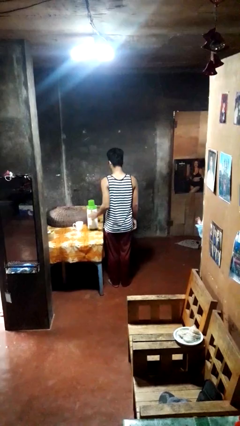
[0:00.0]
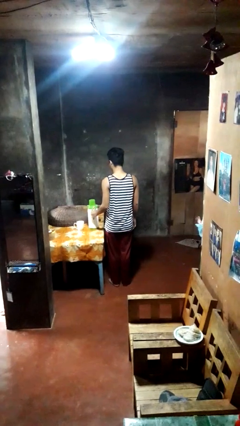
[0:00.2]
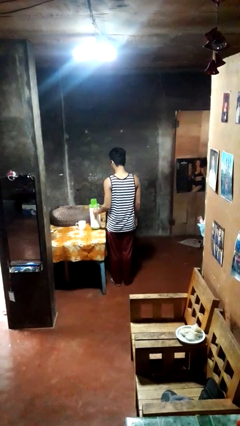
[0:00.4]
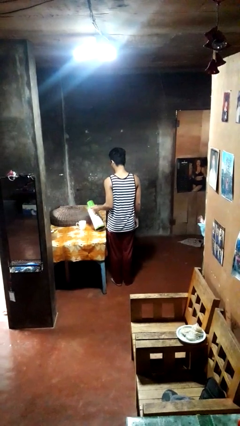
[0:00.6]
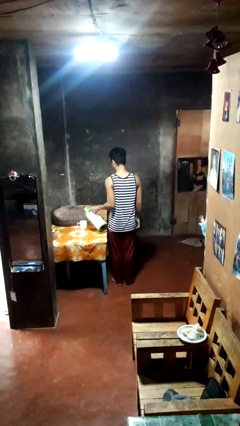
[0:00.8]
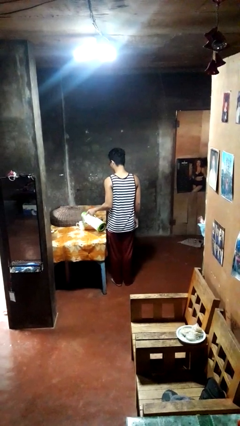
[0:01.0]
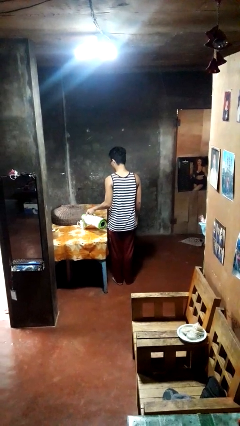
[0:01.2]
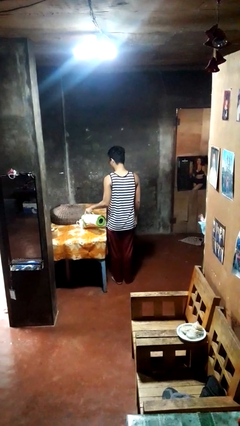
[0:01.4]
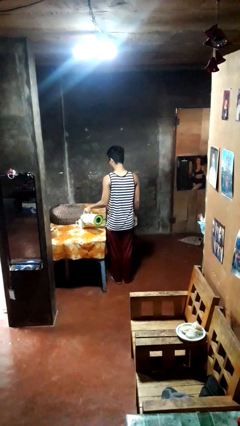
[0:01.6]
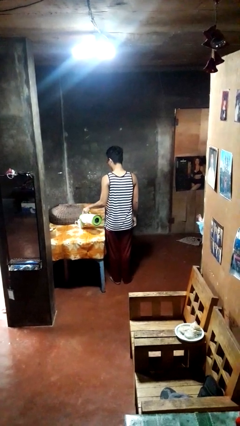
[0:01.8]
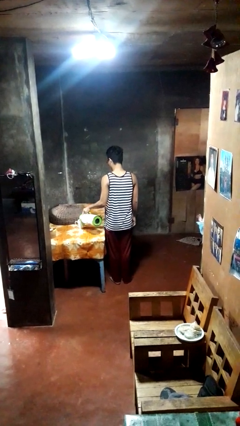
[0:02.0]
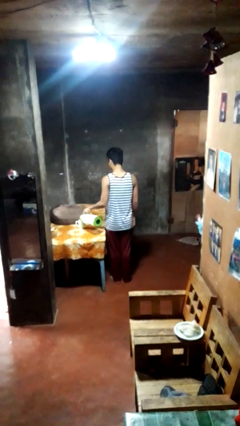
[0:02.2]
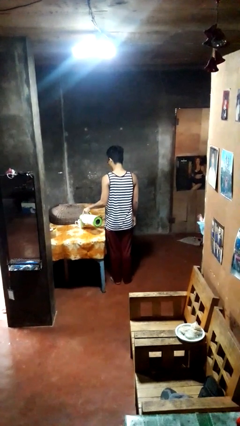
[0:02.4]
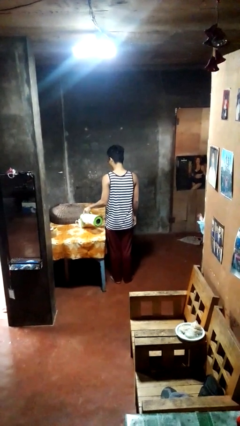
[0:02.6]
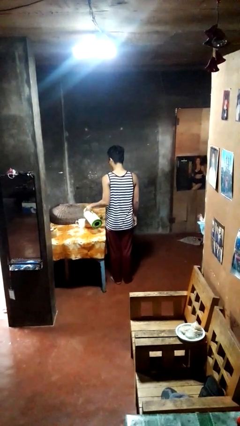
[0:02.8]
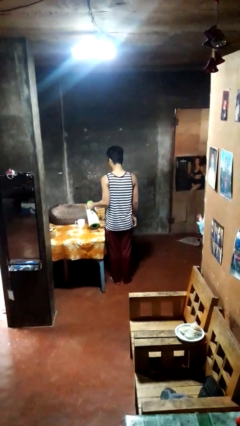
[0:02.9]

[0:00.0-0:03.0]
person pours coffee into mug

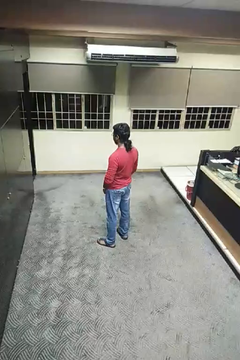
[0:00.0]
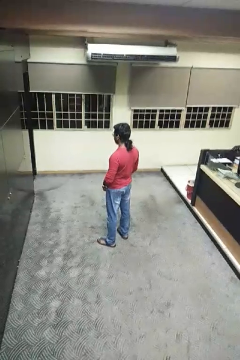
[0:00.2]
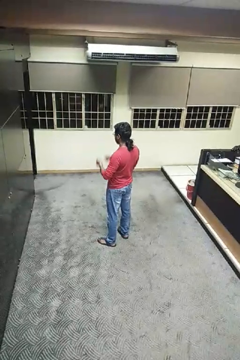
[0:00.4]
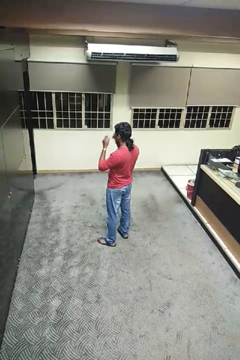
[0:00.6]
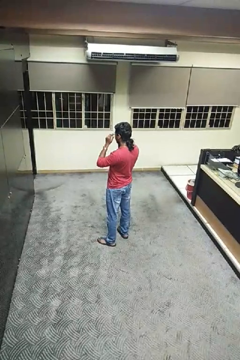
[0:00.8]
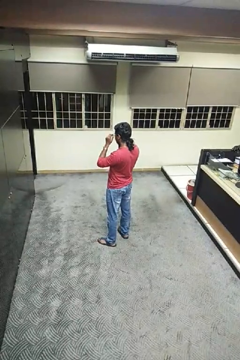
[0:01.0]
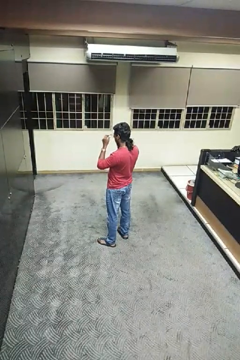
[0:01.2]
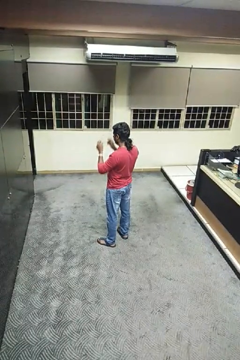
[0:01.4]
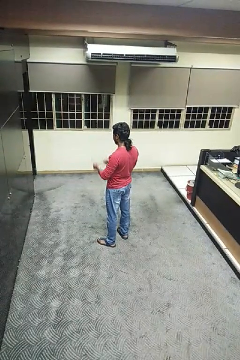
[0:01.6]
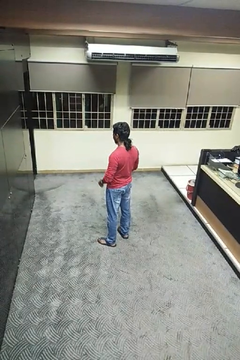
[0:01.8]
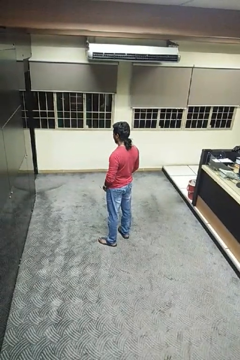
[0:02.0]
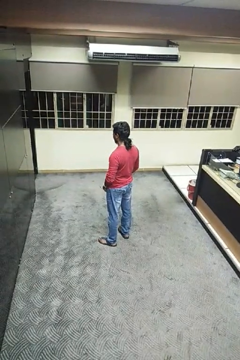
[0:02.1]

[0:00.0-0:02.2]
person takes off glasses

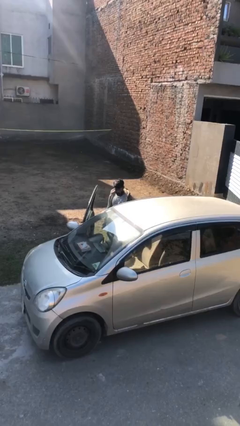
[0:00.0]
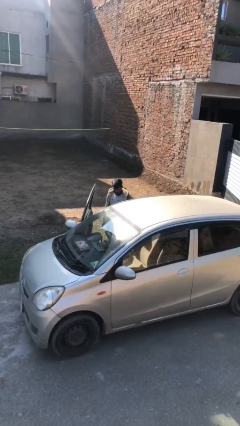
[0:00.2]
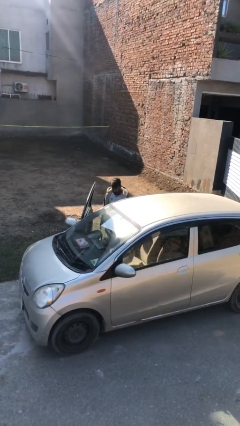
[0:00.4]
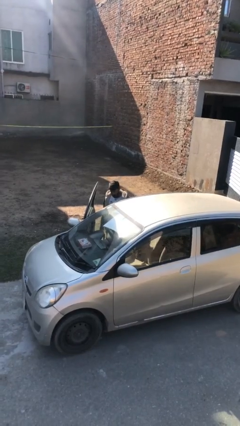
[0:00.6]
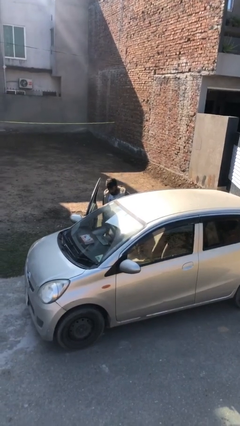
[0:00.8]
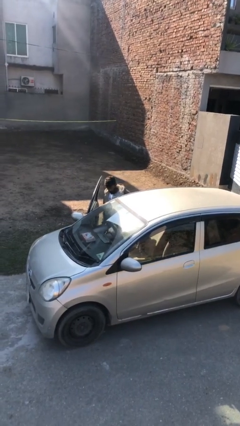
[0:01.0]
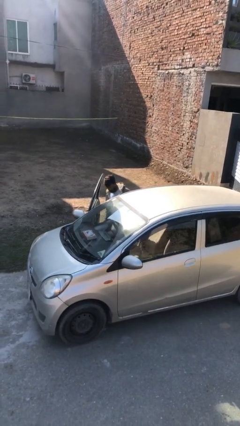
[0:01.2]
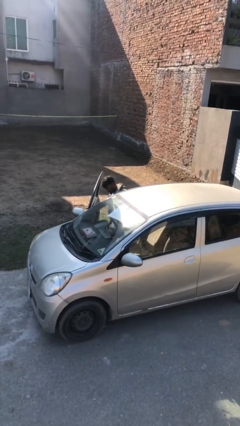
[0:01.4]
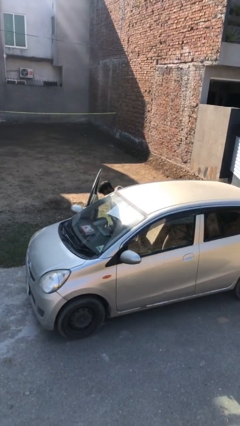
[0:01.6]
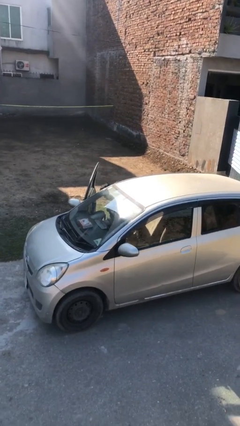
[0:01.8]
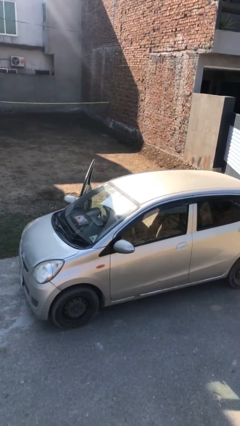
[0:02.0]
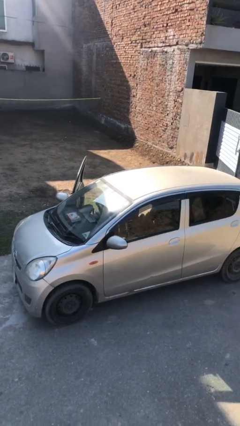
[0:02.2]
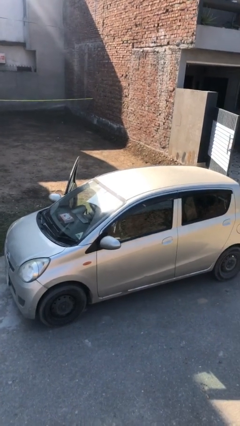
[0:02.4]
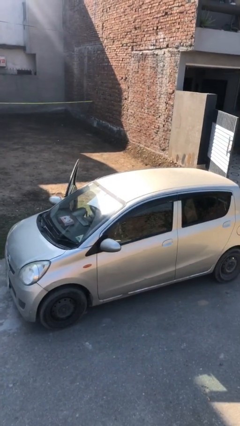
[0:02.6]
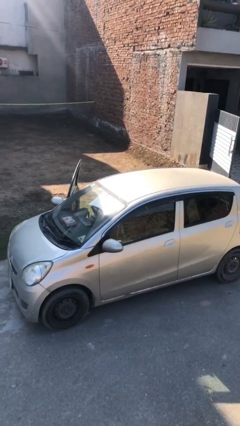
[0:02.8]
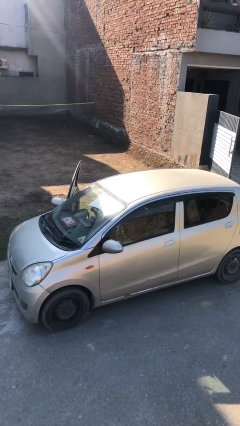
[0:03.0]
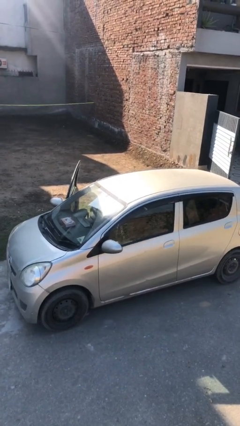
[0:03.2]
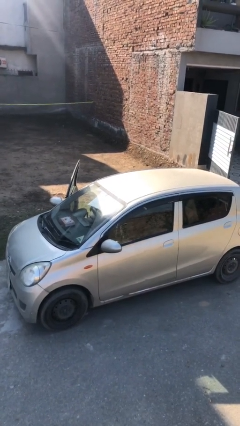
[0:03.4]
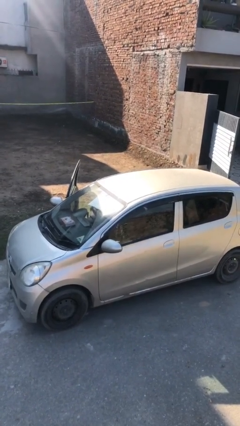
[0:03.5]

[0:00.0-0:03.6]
person enters car

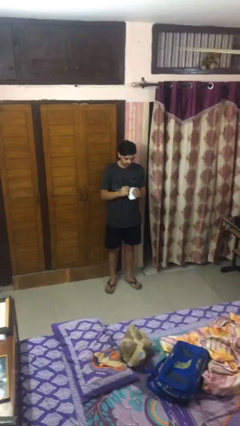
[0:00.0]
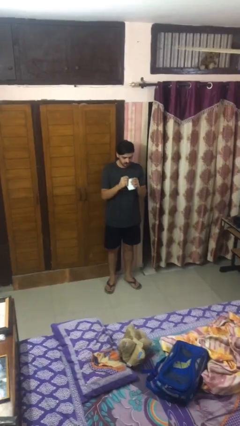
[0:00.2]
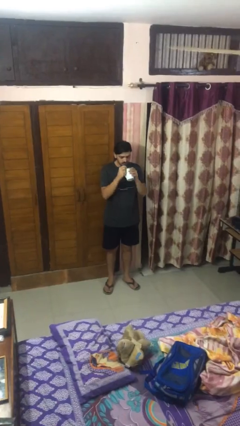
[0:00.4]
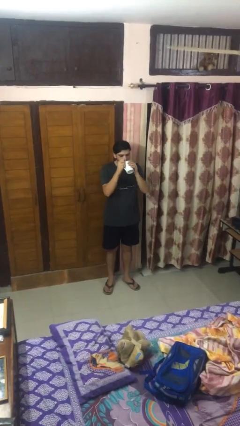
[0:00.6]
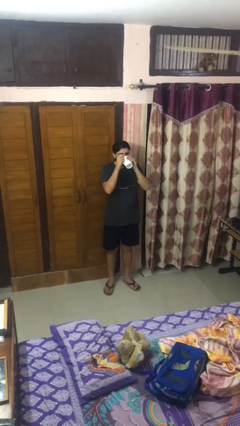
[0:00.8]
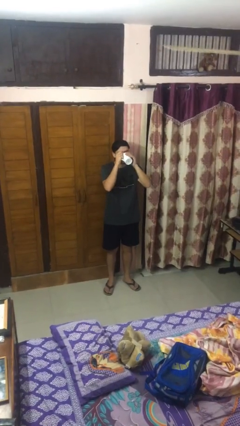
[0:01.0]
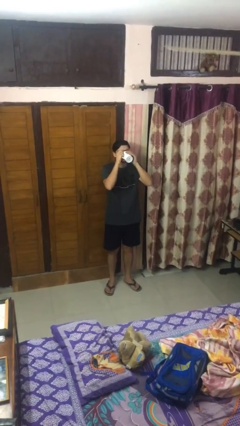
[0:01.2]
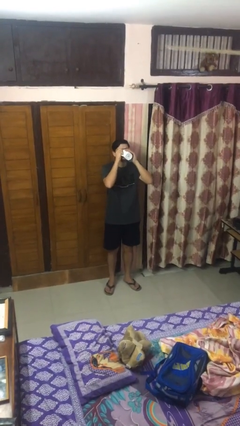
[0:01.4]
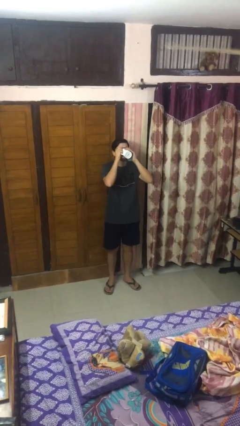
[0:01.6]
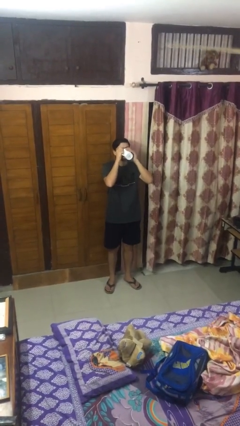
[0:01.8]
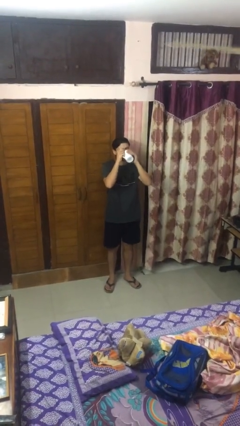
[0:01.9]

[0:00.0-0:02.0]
person drinks from mug

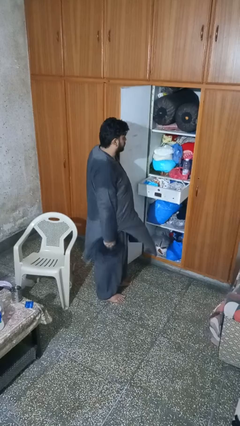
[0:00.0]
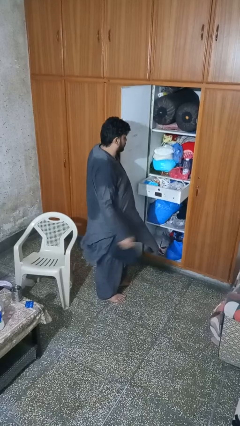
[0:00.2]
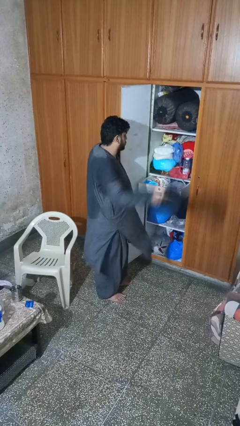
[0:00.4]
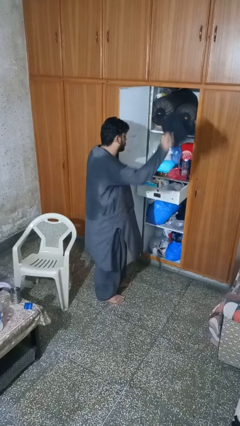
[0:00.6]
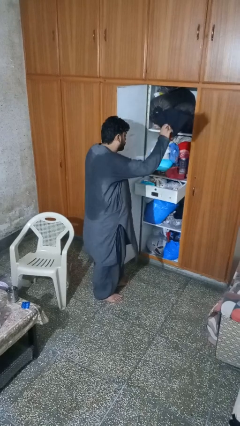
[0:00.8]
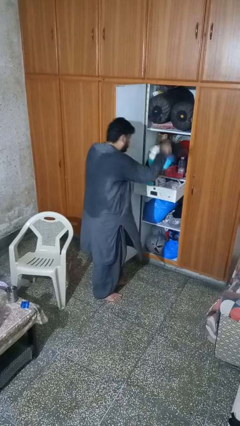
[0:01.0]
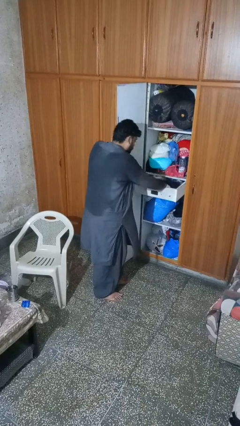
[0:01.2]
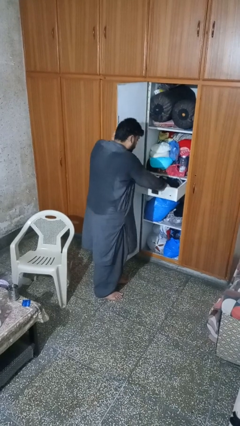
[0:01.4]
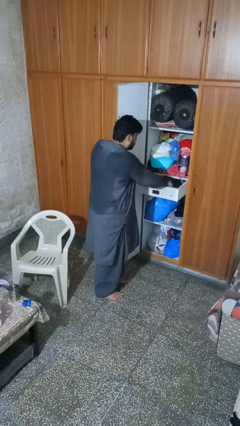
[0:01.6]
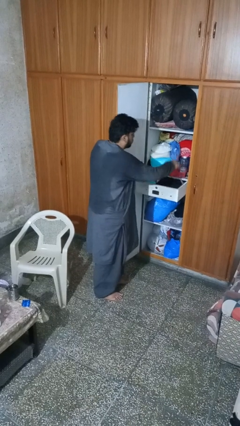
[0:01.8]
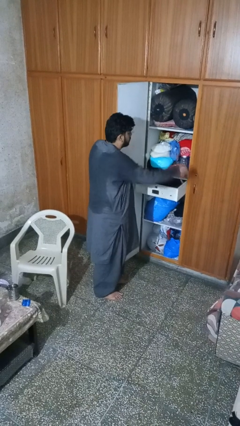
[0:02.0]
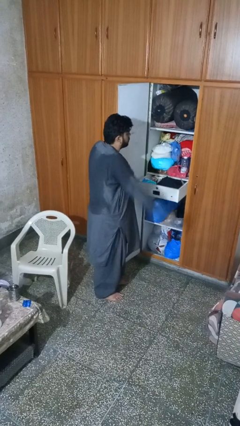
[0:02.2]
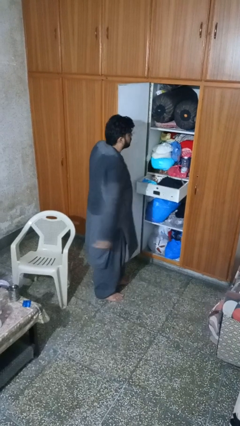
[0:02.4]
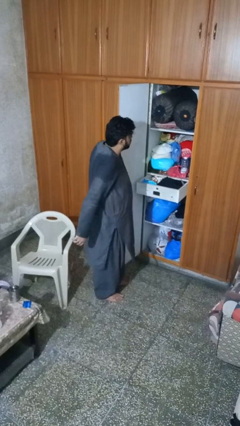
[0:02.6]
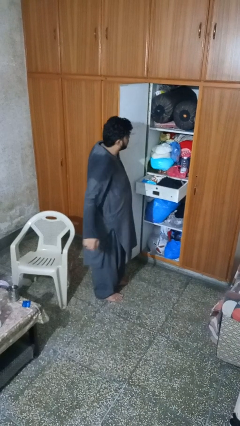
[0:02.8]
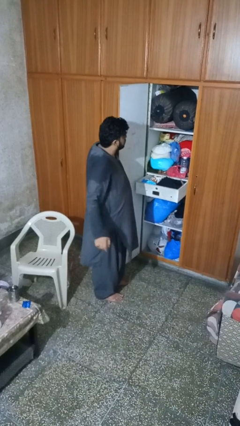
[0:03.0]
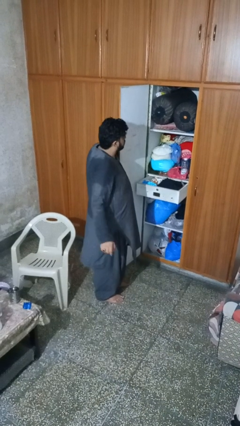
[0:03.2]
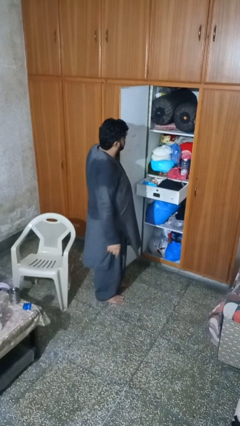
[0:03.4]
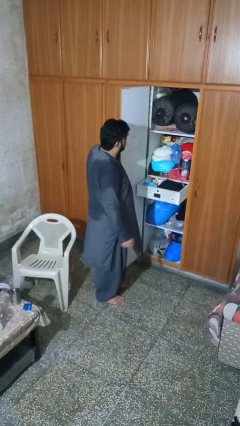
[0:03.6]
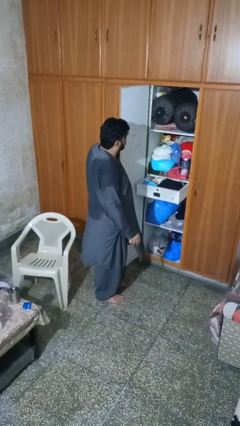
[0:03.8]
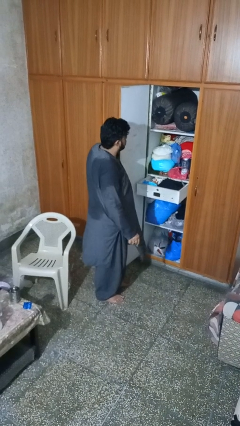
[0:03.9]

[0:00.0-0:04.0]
person puts clothes into dresser

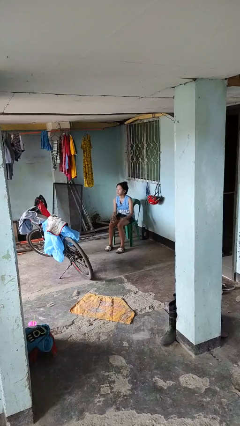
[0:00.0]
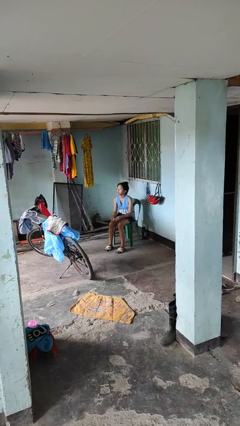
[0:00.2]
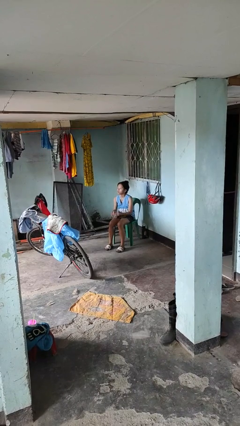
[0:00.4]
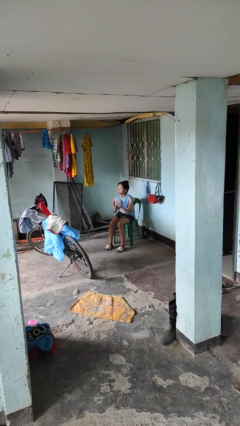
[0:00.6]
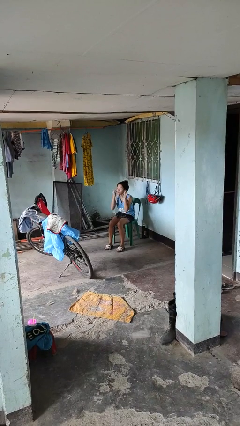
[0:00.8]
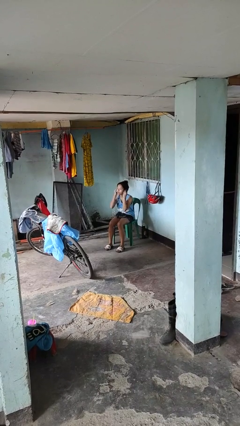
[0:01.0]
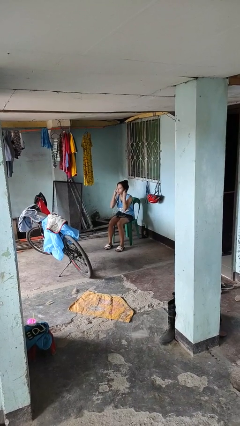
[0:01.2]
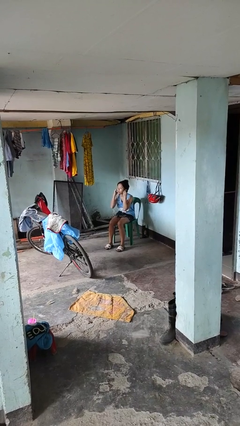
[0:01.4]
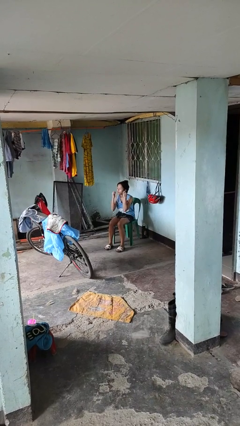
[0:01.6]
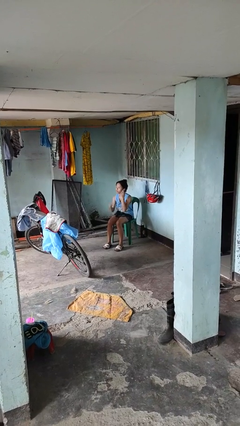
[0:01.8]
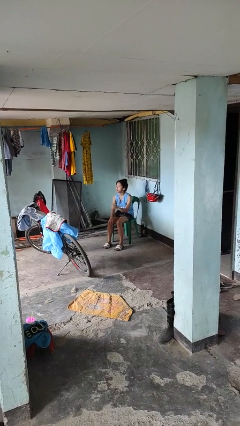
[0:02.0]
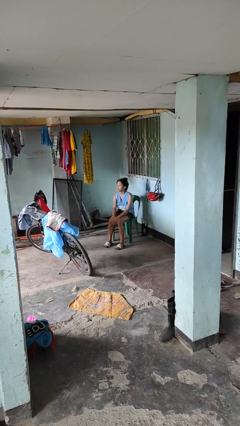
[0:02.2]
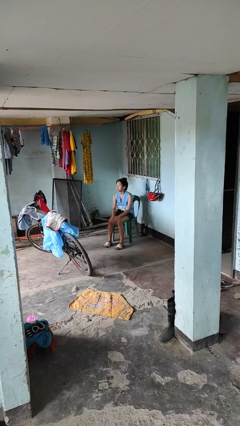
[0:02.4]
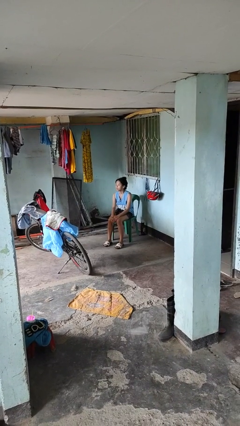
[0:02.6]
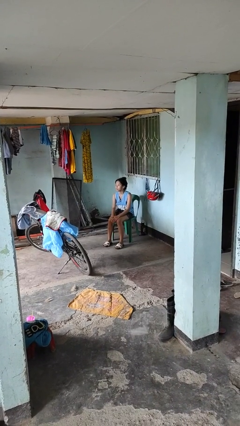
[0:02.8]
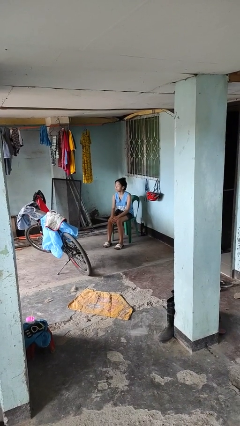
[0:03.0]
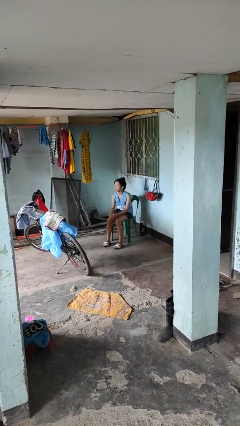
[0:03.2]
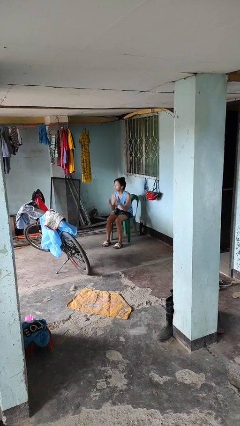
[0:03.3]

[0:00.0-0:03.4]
person puts on headphones
